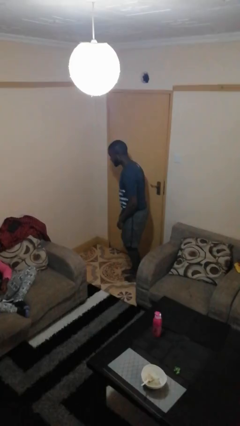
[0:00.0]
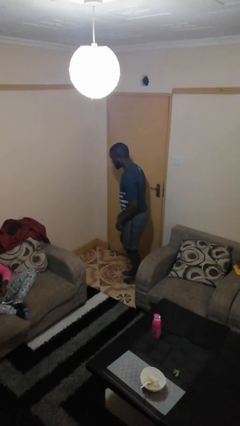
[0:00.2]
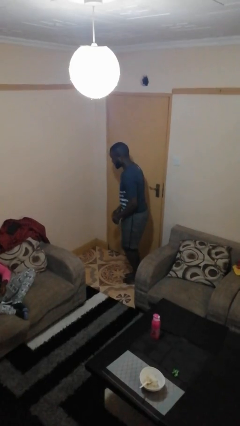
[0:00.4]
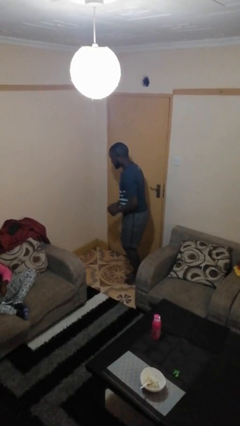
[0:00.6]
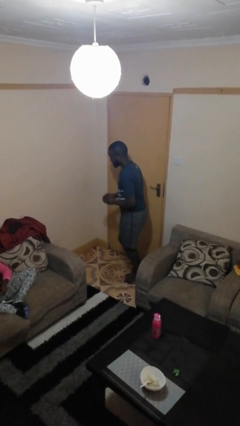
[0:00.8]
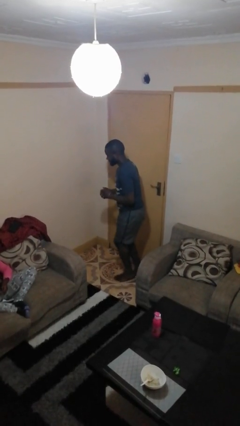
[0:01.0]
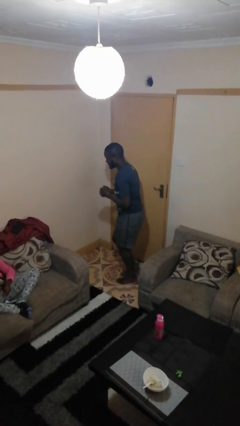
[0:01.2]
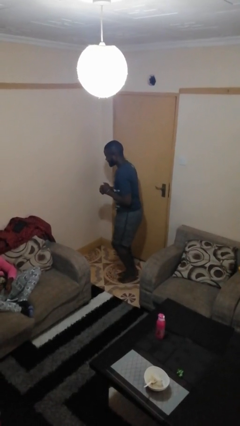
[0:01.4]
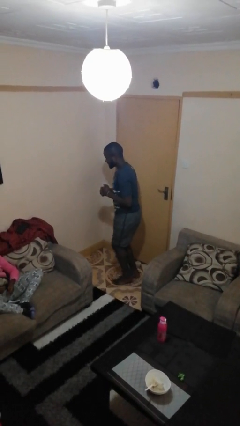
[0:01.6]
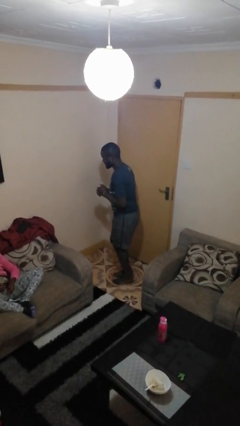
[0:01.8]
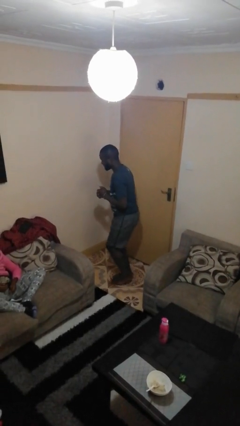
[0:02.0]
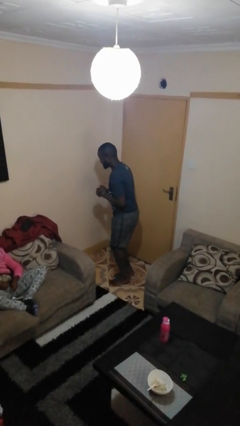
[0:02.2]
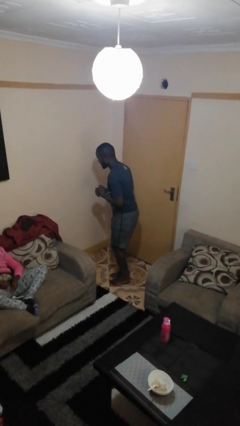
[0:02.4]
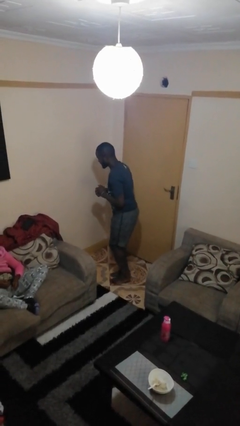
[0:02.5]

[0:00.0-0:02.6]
person walks tiptoe

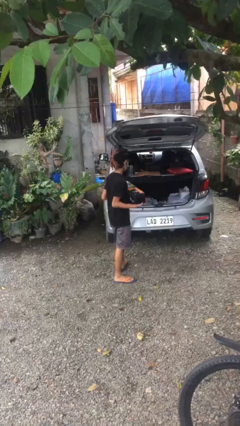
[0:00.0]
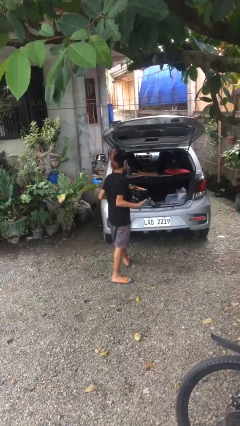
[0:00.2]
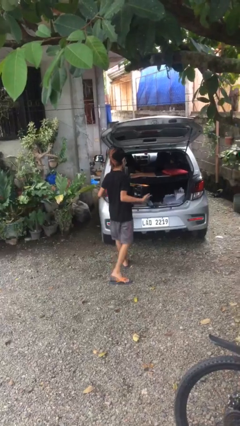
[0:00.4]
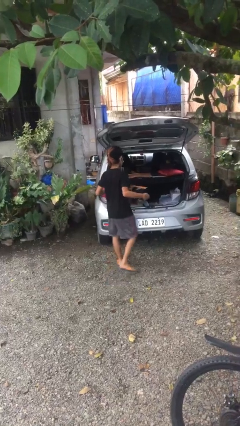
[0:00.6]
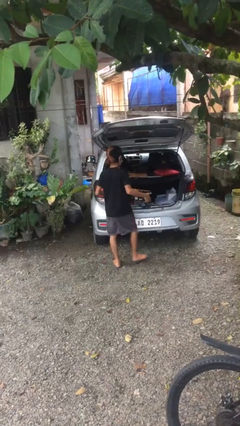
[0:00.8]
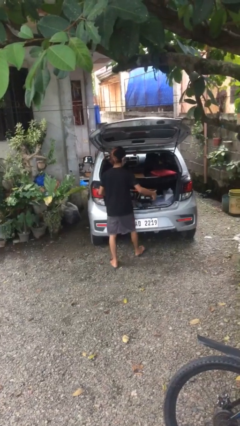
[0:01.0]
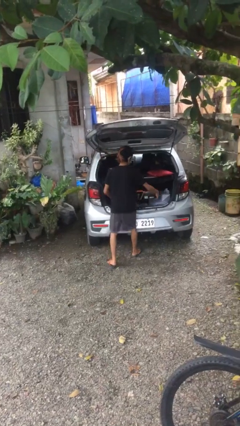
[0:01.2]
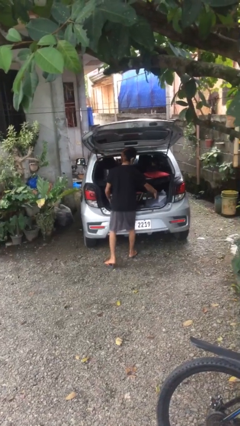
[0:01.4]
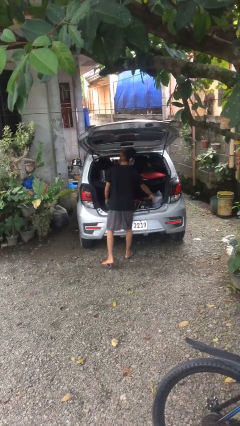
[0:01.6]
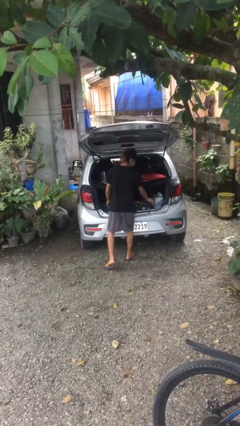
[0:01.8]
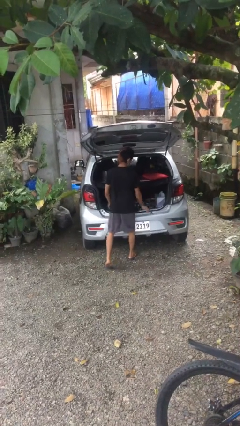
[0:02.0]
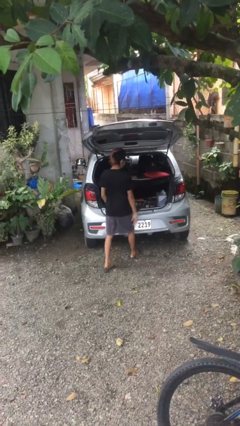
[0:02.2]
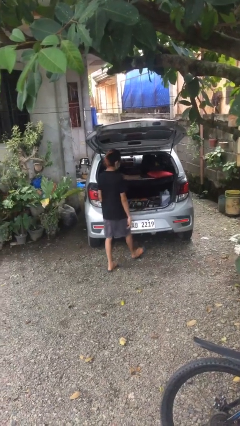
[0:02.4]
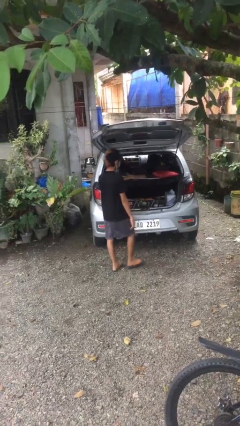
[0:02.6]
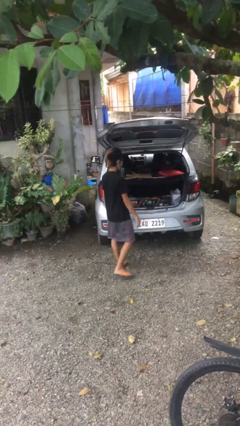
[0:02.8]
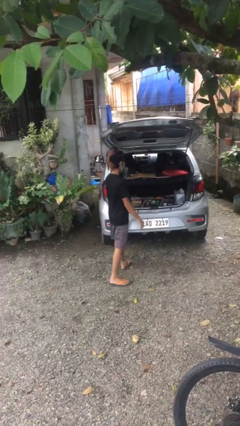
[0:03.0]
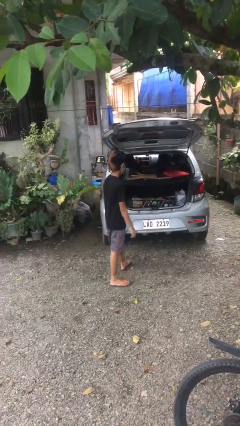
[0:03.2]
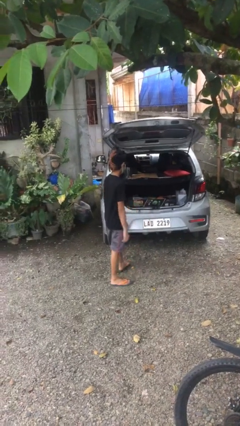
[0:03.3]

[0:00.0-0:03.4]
person loads car

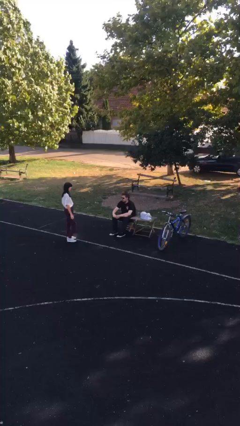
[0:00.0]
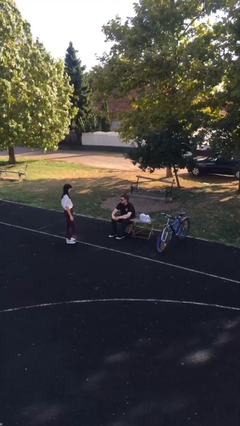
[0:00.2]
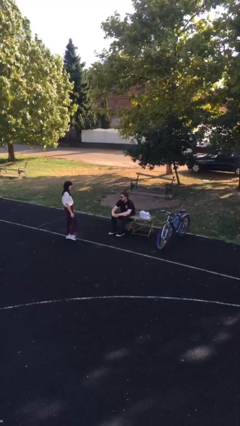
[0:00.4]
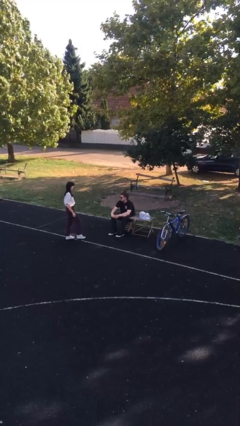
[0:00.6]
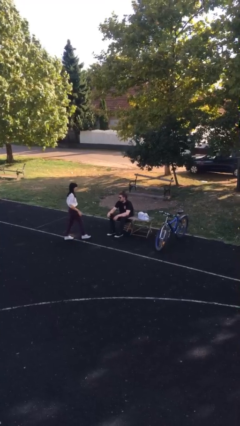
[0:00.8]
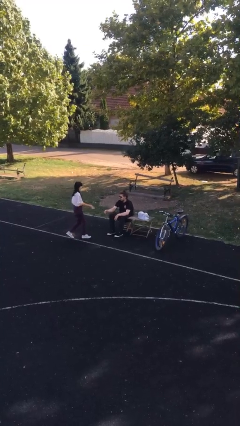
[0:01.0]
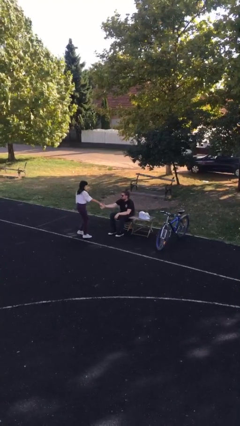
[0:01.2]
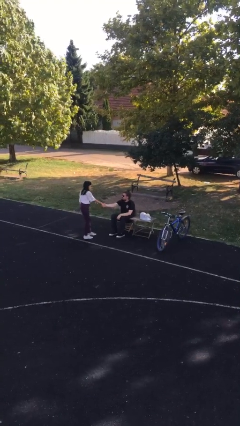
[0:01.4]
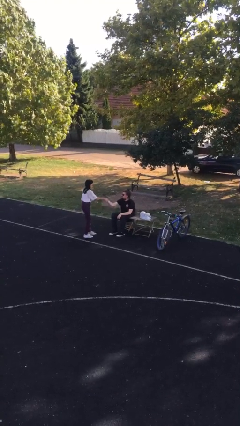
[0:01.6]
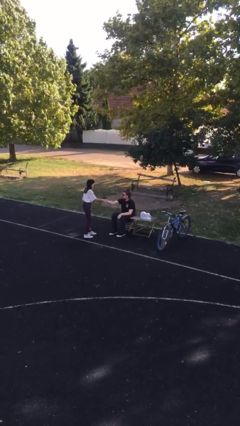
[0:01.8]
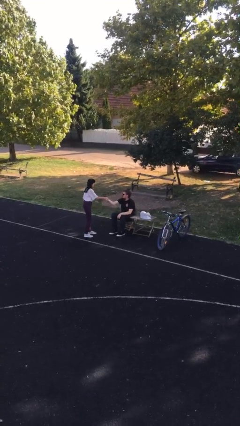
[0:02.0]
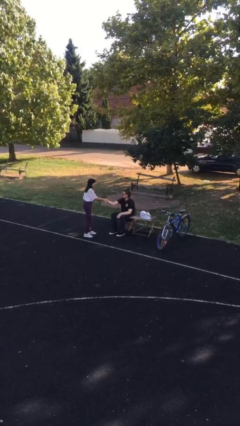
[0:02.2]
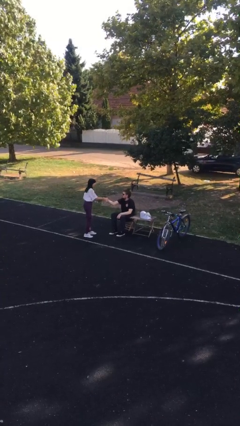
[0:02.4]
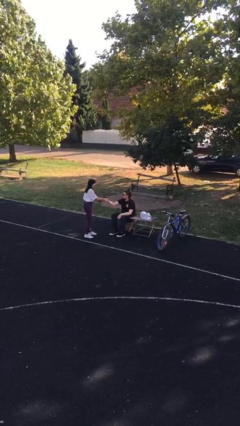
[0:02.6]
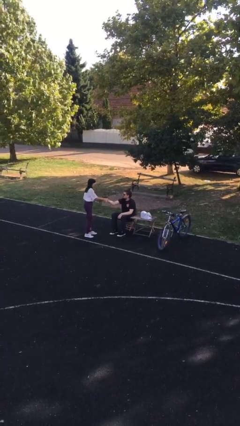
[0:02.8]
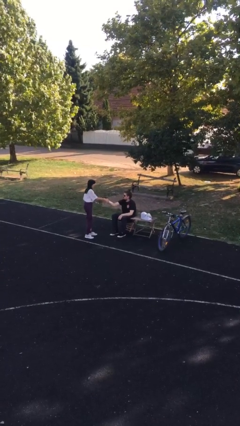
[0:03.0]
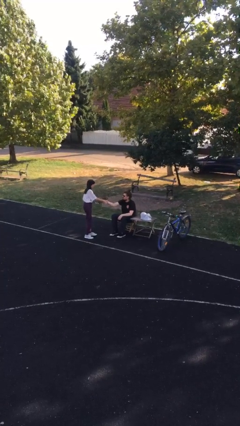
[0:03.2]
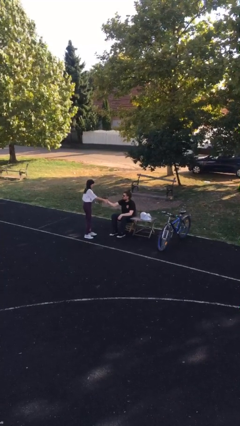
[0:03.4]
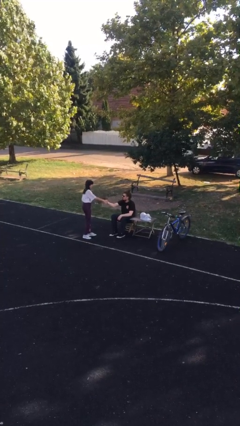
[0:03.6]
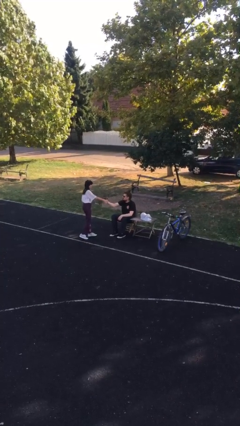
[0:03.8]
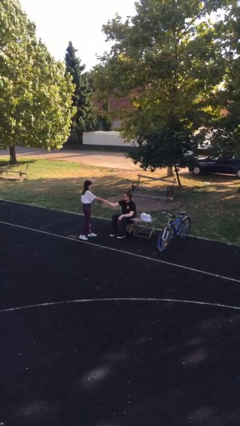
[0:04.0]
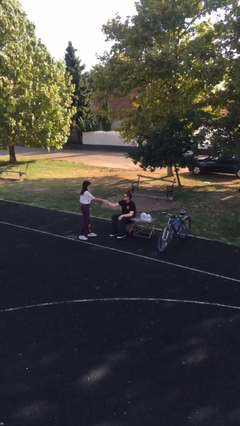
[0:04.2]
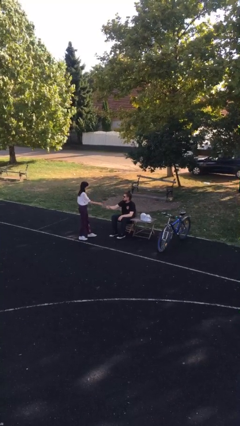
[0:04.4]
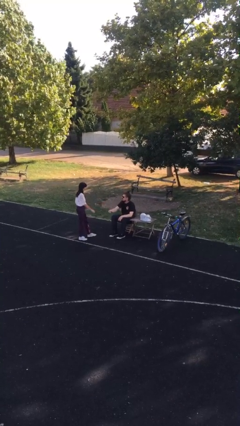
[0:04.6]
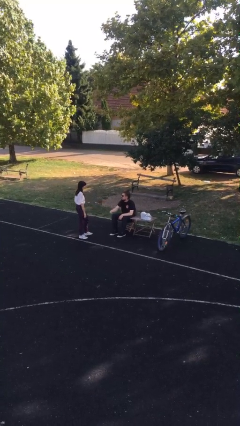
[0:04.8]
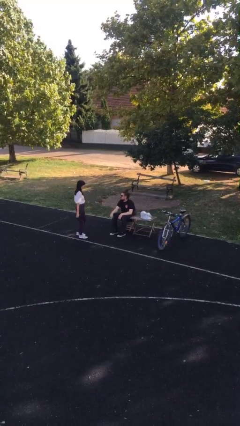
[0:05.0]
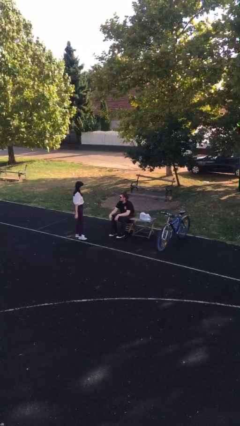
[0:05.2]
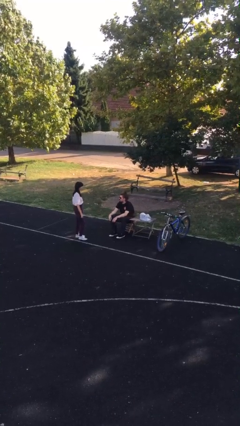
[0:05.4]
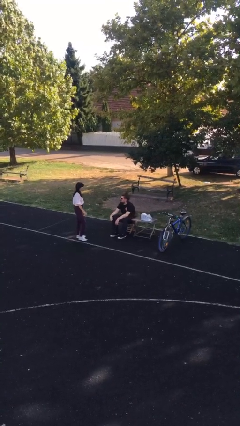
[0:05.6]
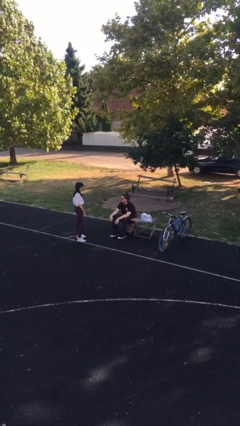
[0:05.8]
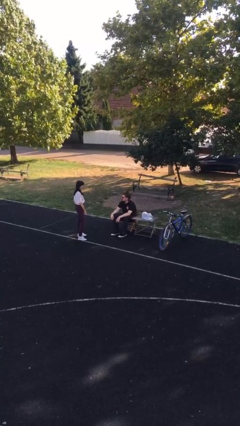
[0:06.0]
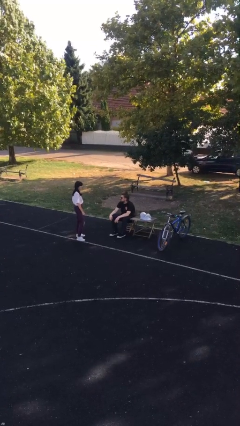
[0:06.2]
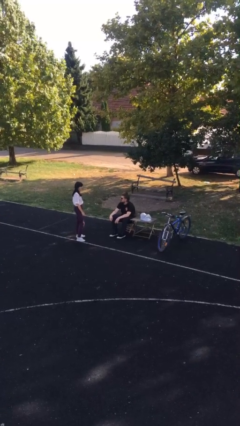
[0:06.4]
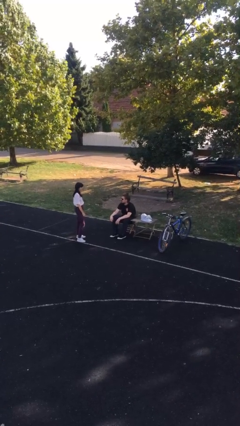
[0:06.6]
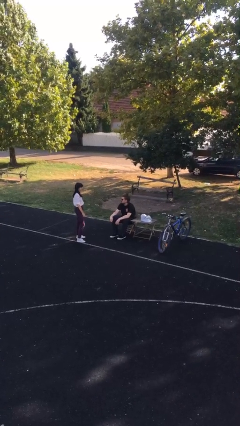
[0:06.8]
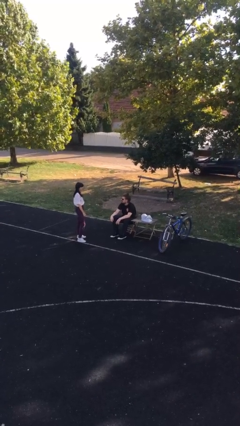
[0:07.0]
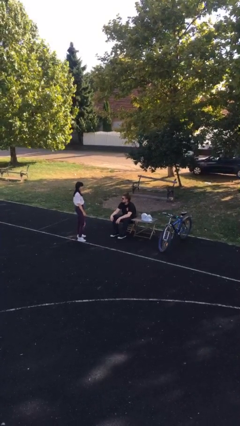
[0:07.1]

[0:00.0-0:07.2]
person shakes hand

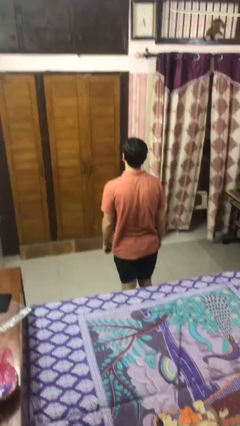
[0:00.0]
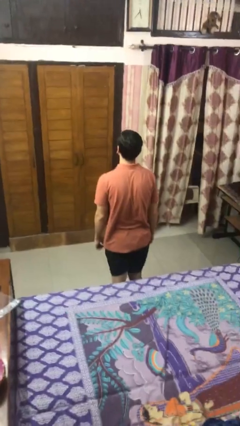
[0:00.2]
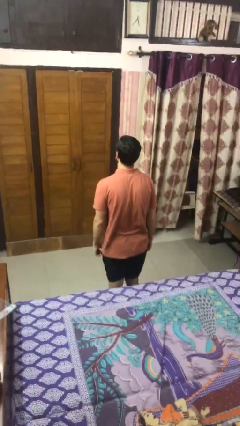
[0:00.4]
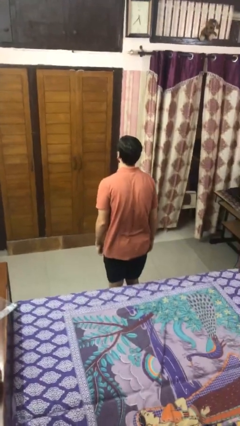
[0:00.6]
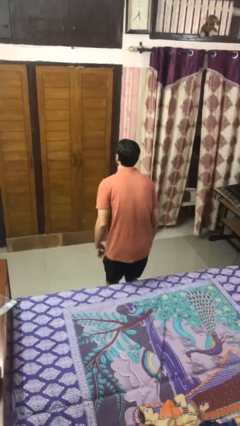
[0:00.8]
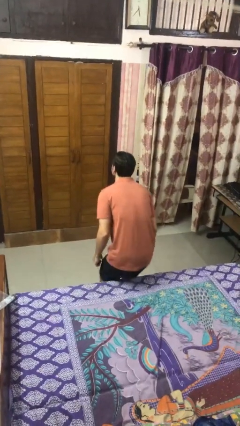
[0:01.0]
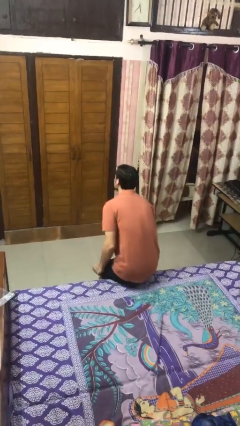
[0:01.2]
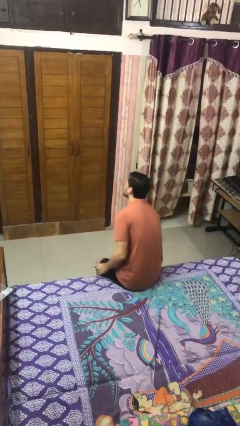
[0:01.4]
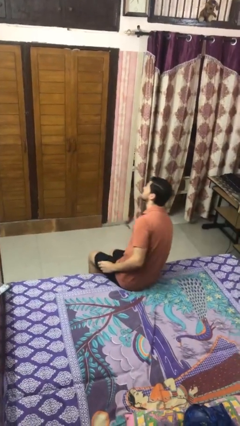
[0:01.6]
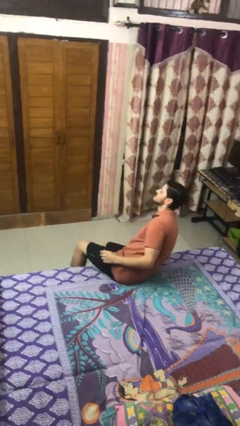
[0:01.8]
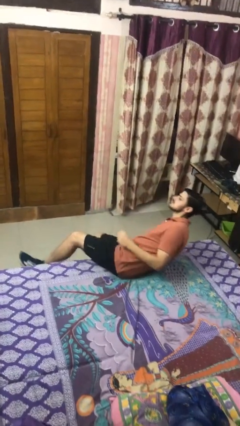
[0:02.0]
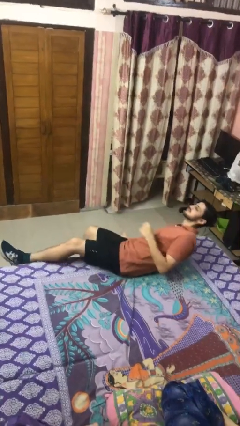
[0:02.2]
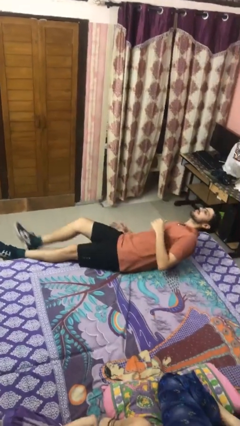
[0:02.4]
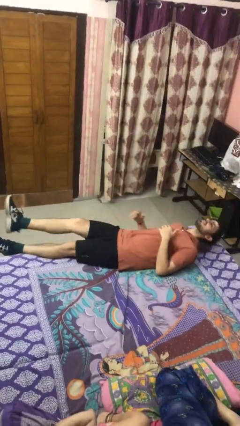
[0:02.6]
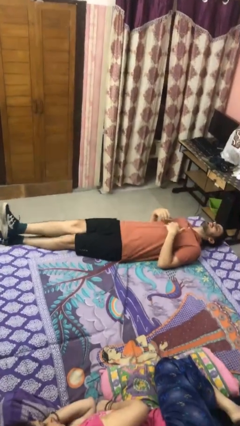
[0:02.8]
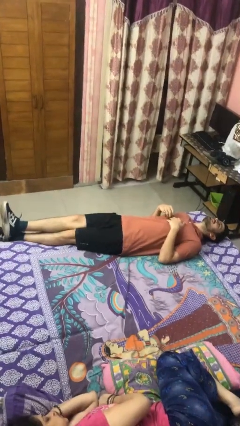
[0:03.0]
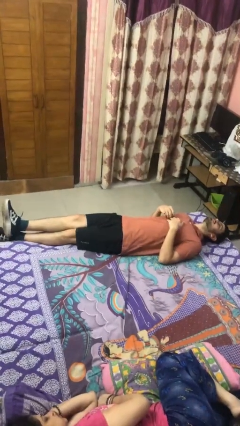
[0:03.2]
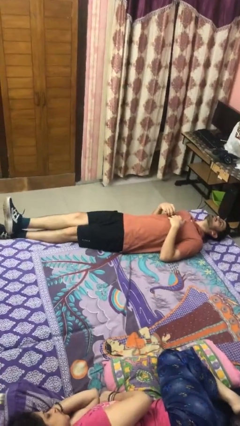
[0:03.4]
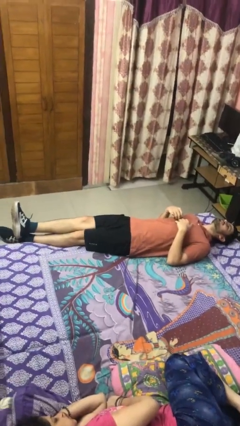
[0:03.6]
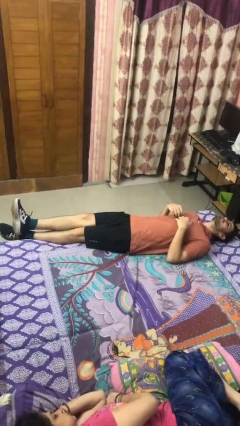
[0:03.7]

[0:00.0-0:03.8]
person lies down on bed

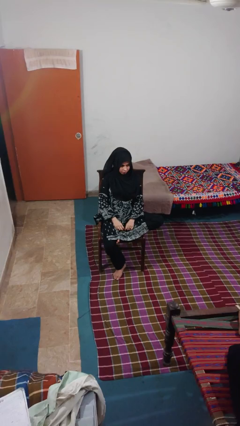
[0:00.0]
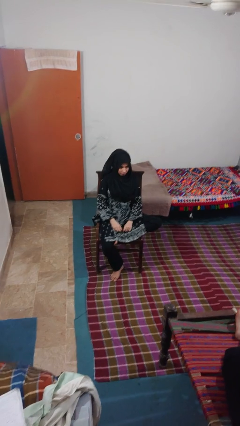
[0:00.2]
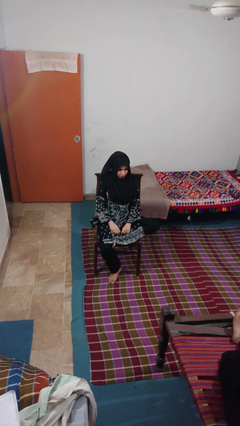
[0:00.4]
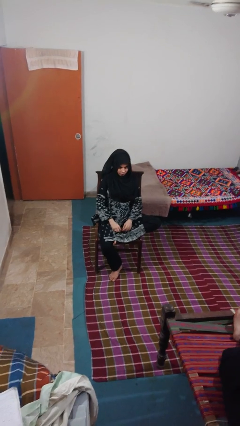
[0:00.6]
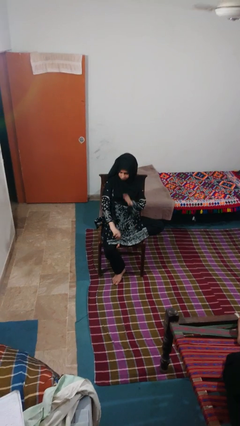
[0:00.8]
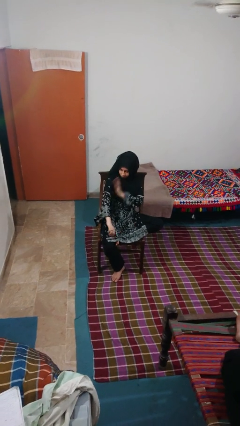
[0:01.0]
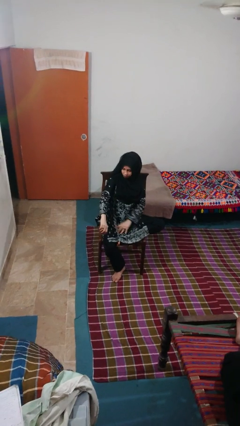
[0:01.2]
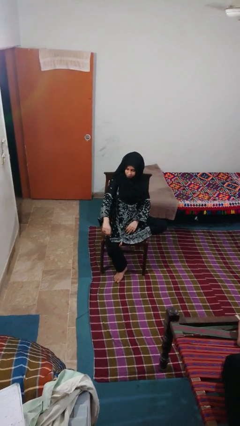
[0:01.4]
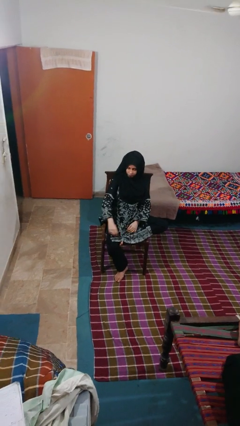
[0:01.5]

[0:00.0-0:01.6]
person swats bug
